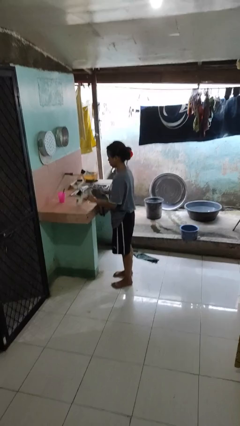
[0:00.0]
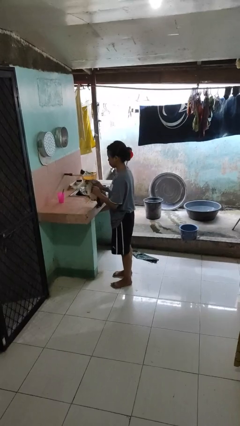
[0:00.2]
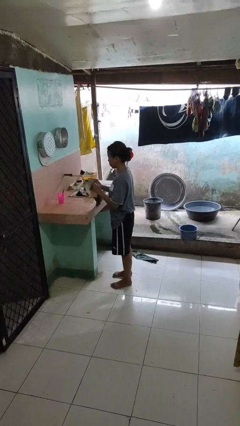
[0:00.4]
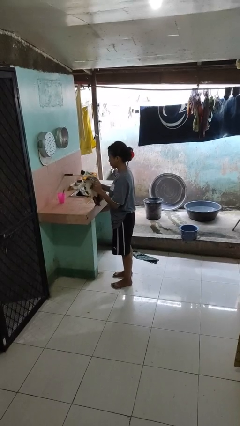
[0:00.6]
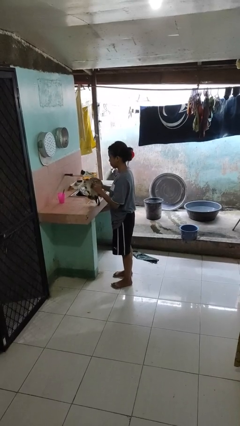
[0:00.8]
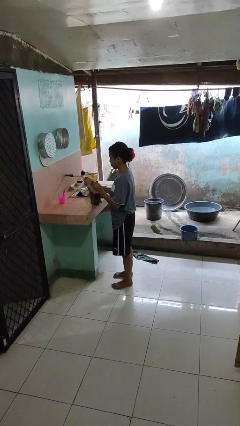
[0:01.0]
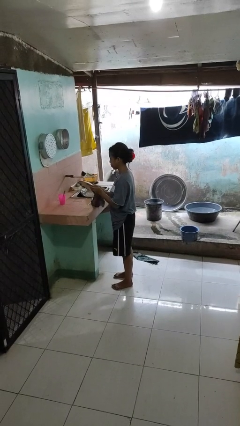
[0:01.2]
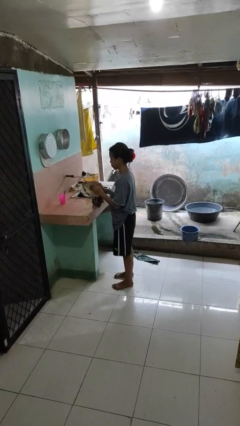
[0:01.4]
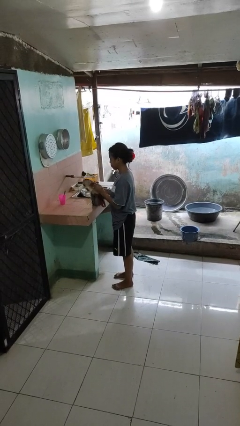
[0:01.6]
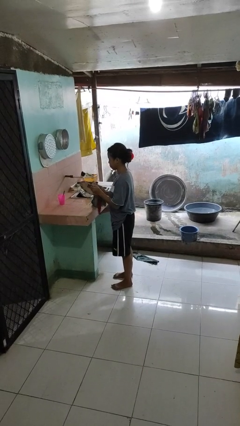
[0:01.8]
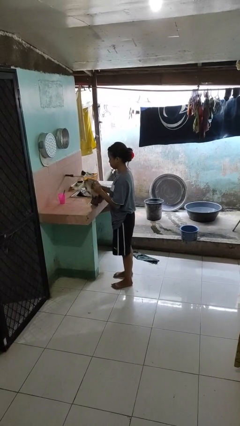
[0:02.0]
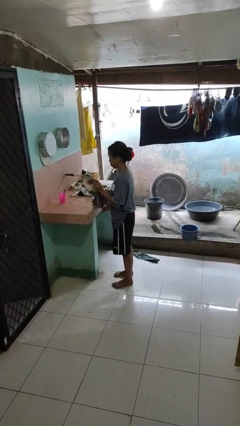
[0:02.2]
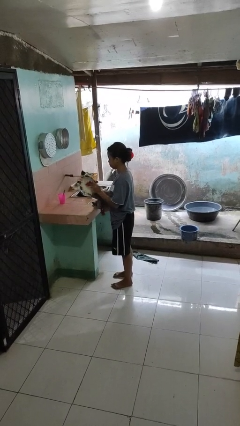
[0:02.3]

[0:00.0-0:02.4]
person dries dish

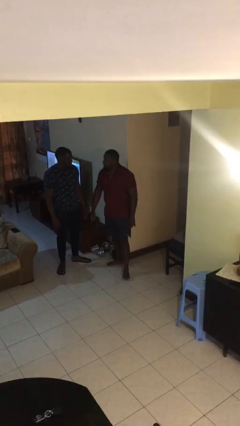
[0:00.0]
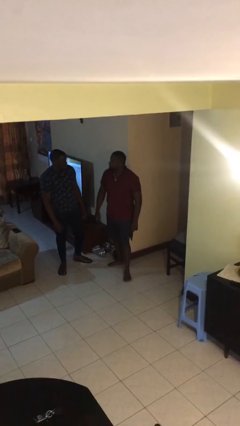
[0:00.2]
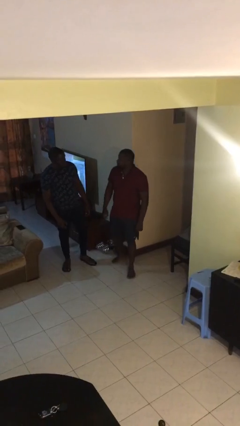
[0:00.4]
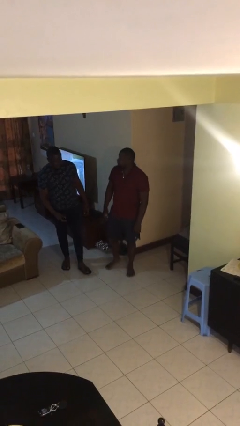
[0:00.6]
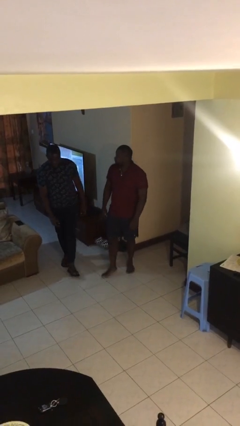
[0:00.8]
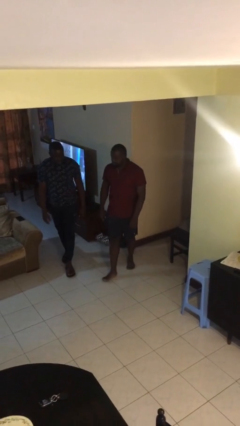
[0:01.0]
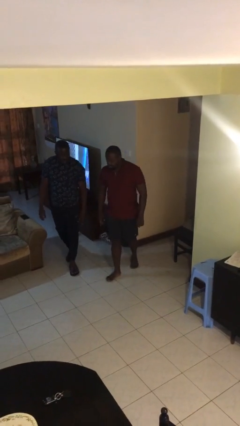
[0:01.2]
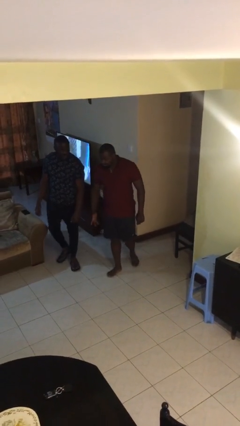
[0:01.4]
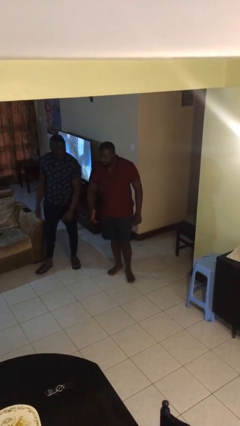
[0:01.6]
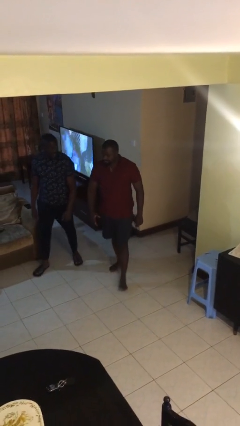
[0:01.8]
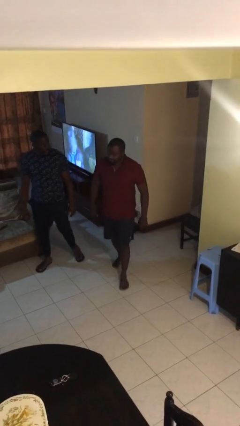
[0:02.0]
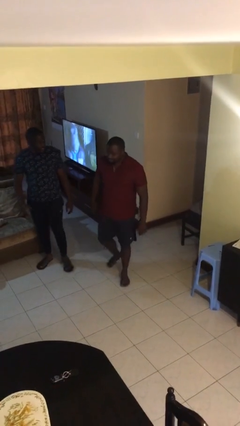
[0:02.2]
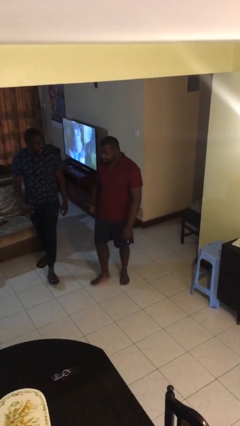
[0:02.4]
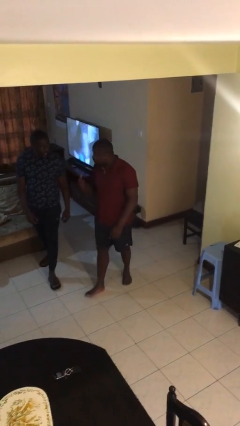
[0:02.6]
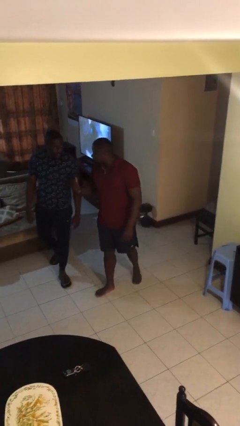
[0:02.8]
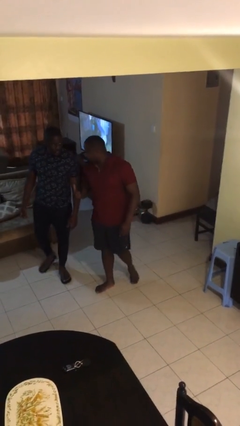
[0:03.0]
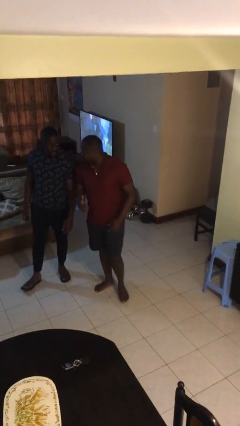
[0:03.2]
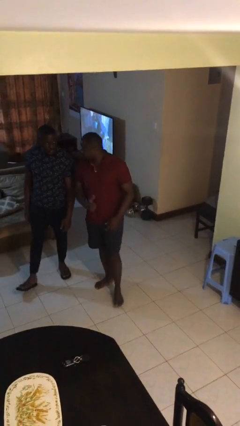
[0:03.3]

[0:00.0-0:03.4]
person talks to person

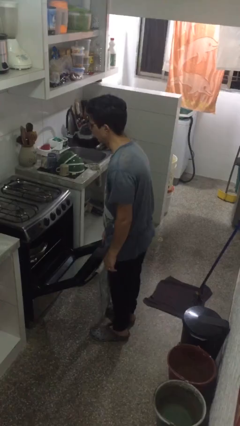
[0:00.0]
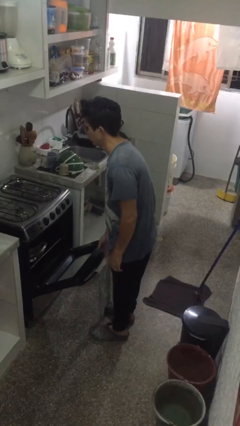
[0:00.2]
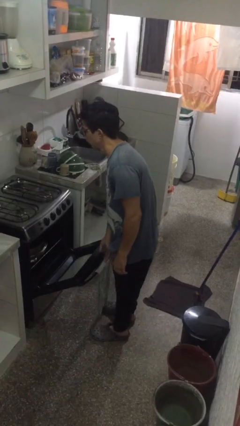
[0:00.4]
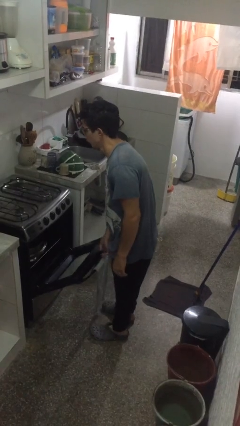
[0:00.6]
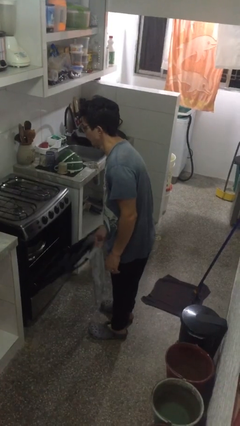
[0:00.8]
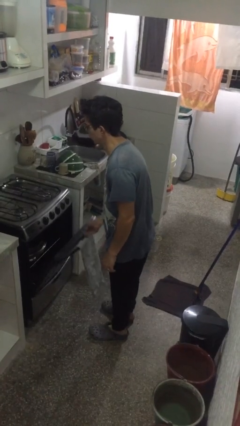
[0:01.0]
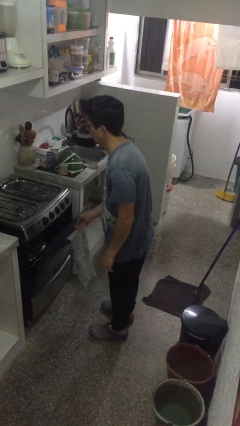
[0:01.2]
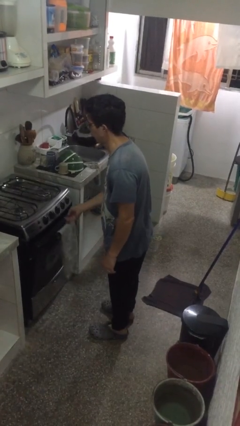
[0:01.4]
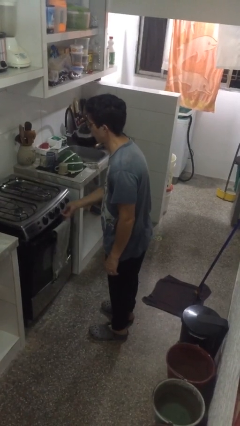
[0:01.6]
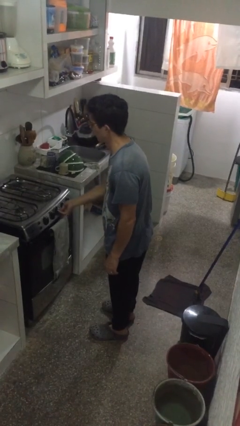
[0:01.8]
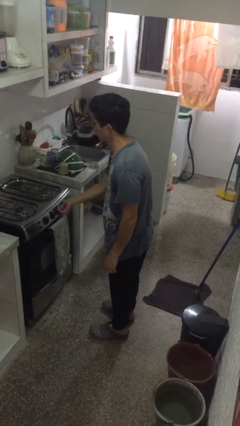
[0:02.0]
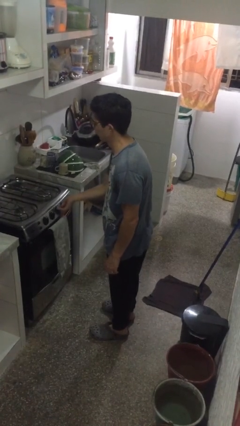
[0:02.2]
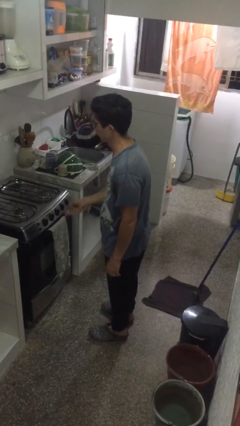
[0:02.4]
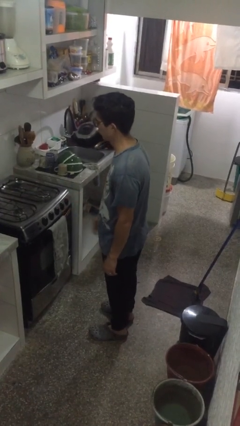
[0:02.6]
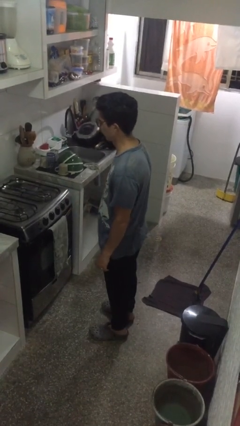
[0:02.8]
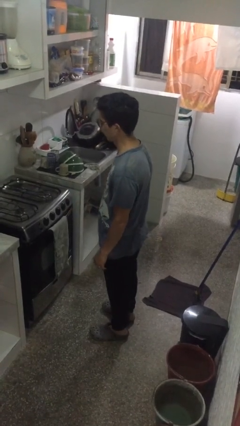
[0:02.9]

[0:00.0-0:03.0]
person closes oven door

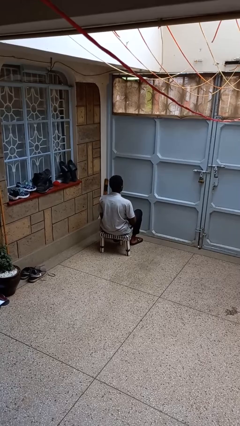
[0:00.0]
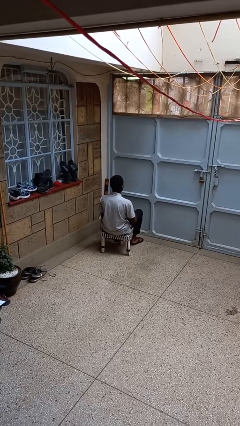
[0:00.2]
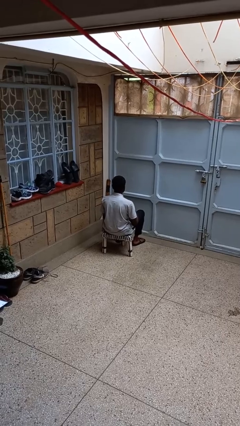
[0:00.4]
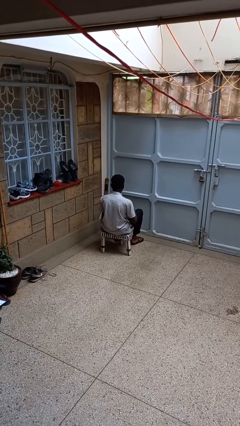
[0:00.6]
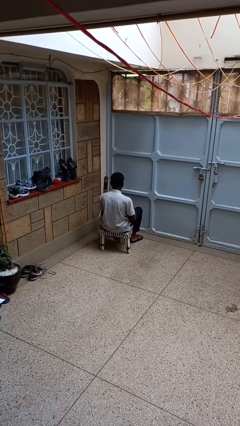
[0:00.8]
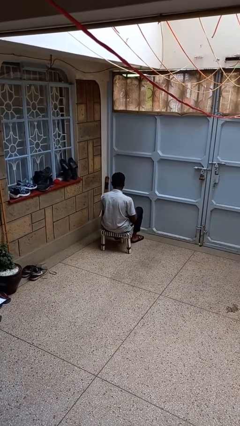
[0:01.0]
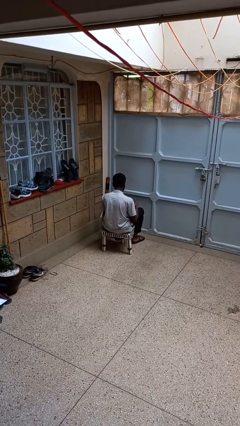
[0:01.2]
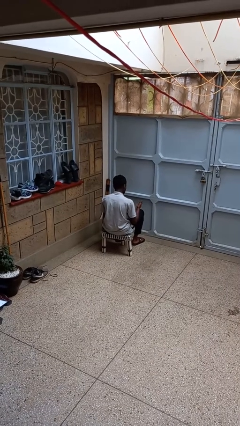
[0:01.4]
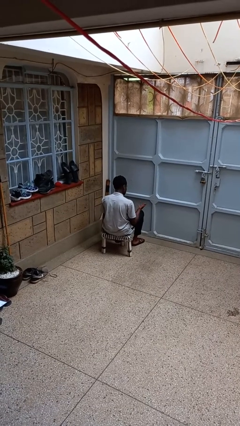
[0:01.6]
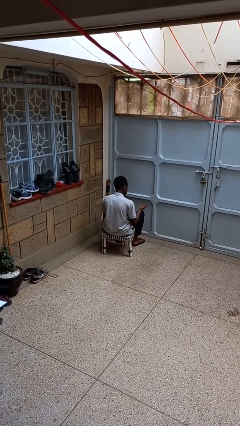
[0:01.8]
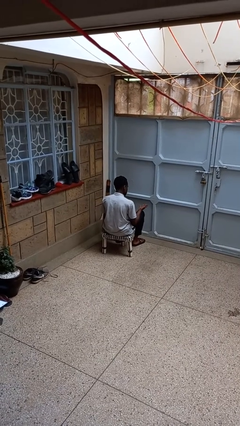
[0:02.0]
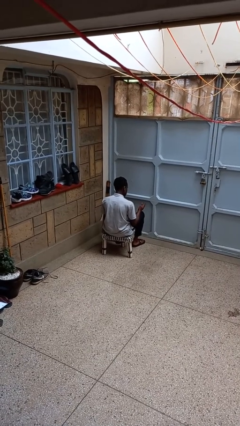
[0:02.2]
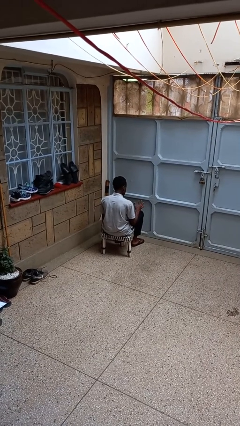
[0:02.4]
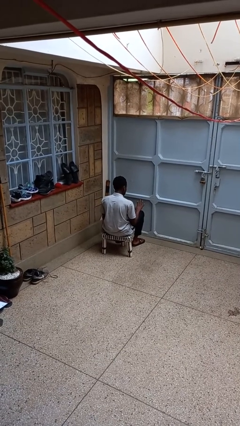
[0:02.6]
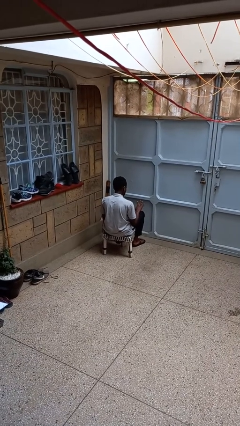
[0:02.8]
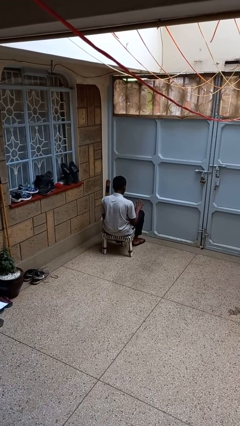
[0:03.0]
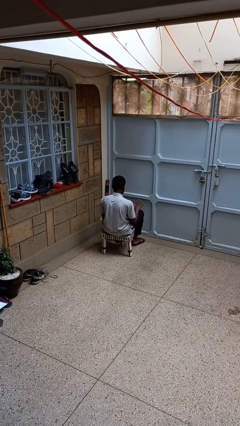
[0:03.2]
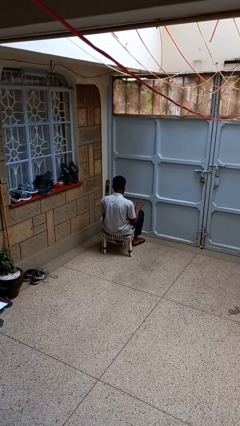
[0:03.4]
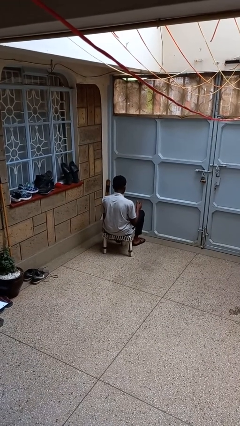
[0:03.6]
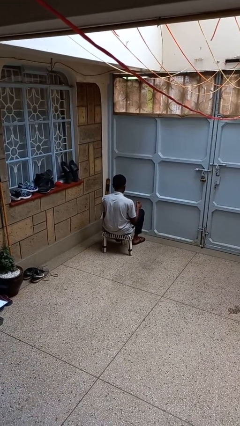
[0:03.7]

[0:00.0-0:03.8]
person looks at hands in lap

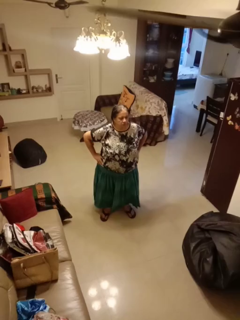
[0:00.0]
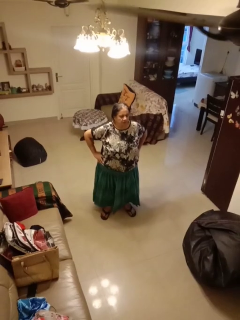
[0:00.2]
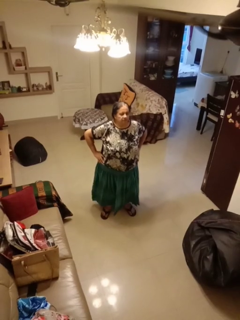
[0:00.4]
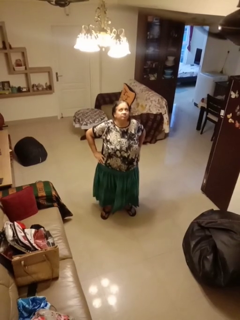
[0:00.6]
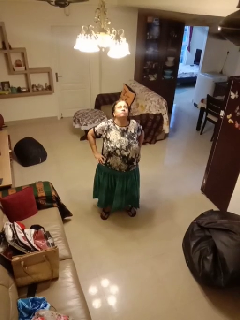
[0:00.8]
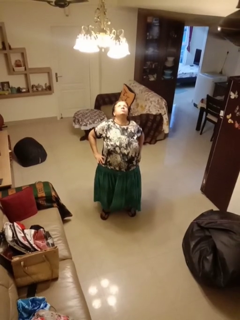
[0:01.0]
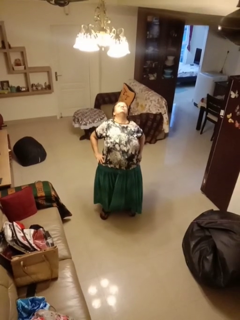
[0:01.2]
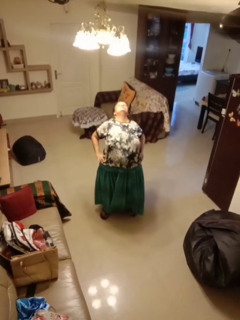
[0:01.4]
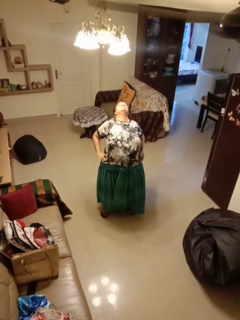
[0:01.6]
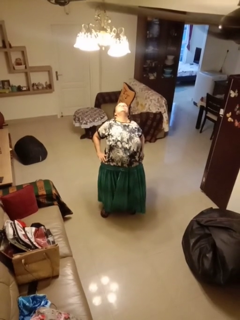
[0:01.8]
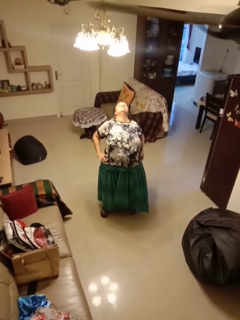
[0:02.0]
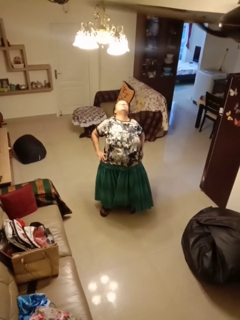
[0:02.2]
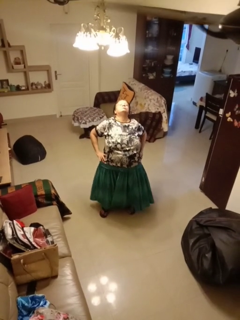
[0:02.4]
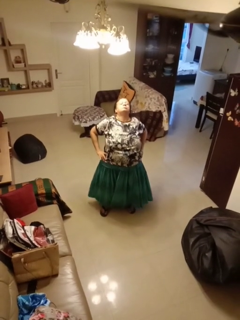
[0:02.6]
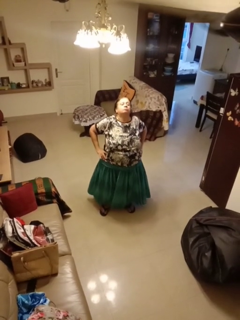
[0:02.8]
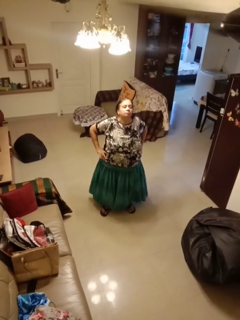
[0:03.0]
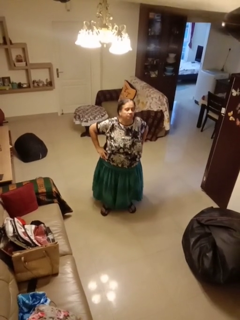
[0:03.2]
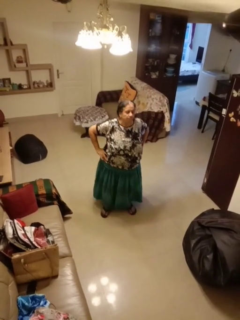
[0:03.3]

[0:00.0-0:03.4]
person stretches back

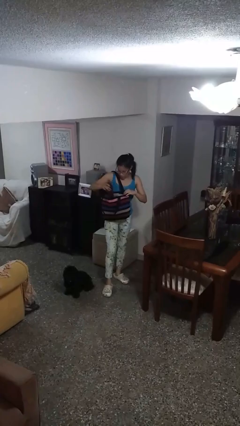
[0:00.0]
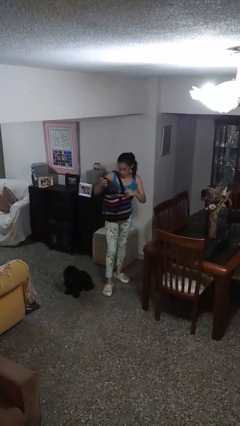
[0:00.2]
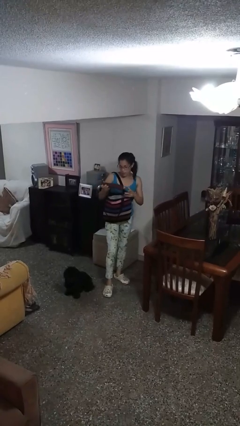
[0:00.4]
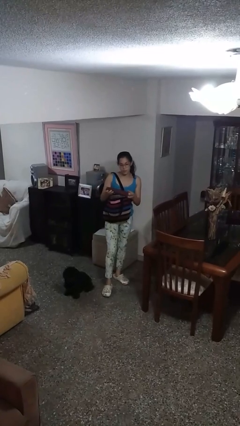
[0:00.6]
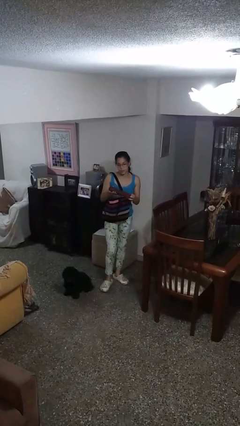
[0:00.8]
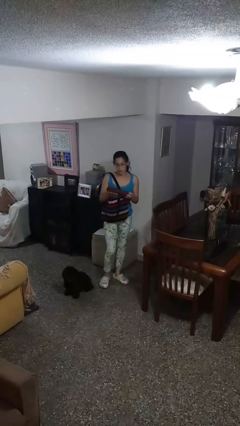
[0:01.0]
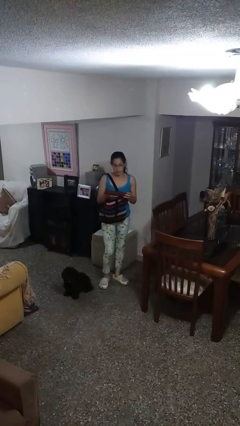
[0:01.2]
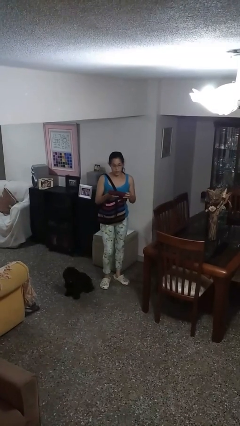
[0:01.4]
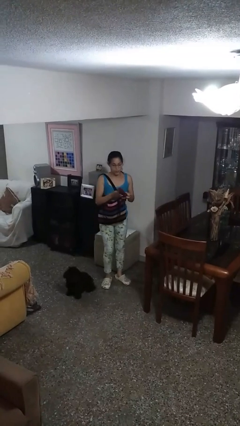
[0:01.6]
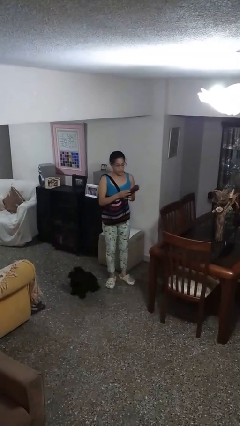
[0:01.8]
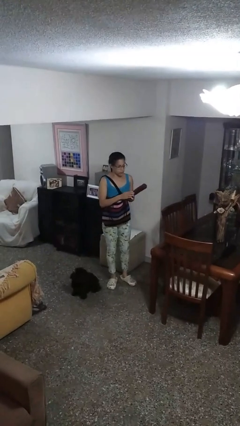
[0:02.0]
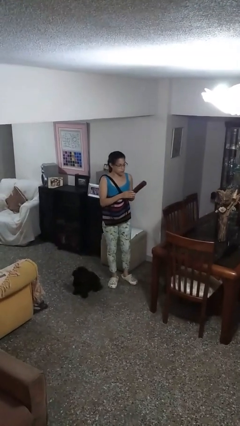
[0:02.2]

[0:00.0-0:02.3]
person takes object from purse
